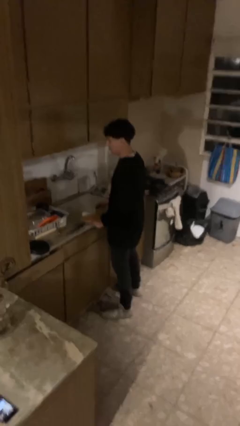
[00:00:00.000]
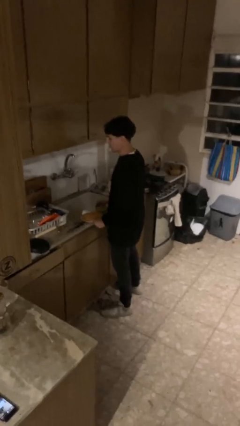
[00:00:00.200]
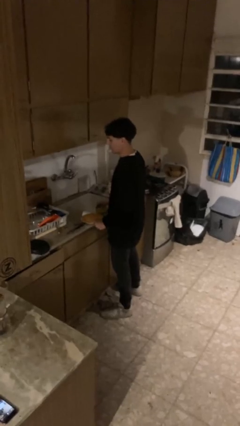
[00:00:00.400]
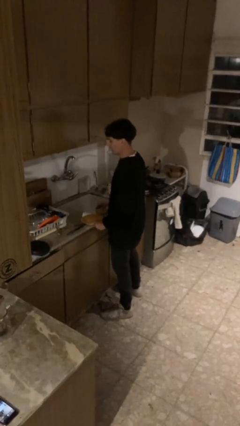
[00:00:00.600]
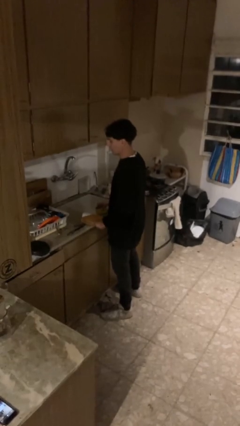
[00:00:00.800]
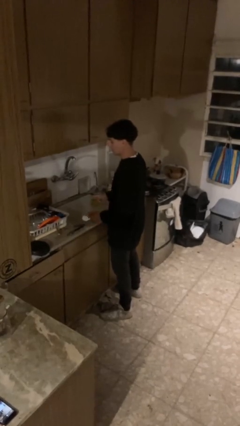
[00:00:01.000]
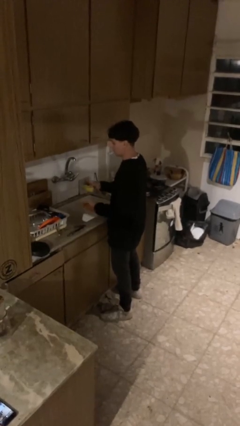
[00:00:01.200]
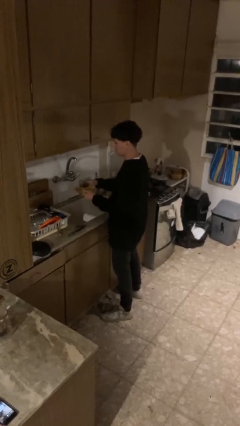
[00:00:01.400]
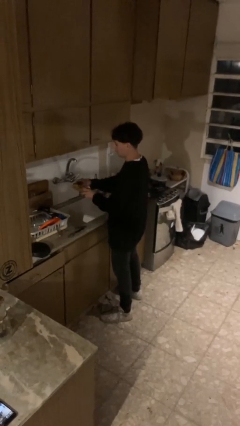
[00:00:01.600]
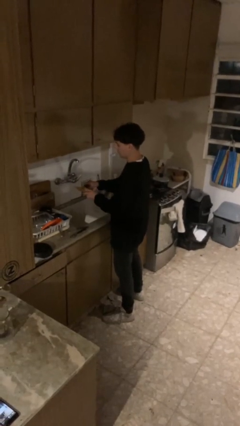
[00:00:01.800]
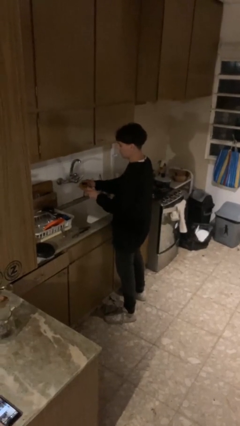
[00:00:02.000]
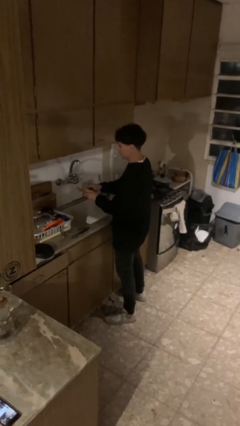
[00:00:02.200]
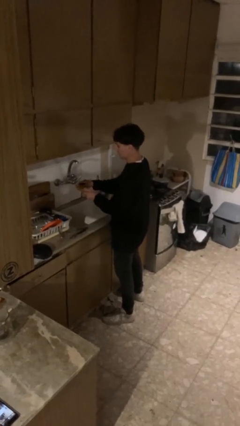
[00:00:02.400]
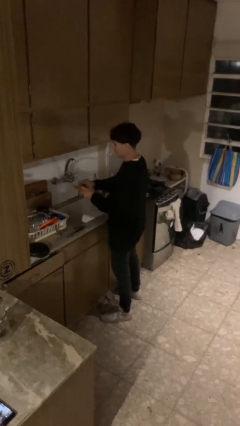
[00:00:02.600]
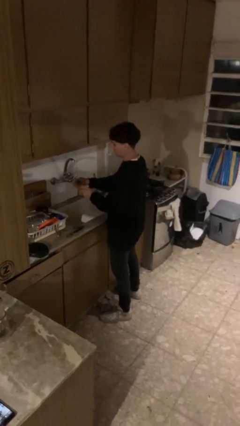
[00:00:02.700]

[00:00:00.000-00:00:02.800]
person washes dish

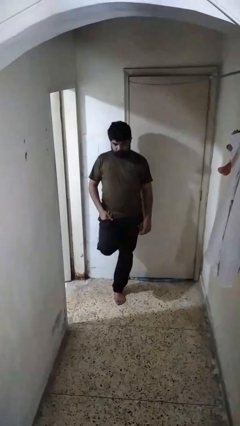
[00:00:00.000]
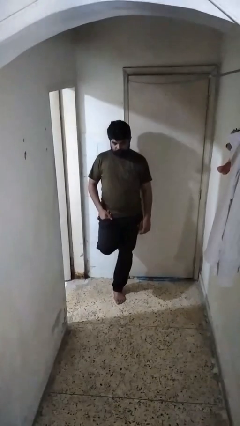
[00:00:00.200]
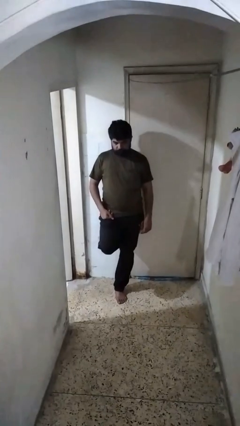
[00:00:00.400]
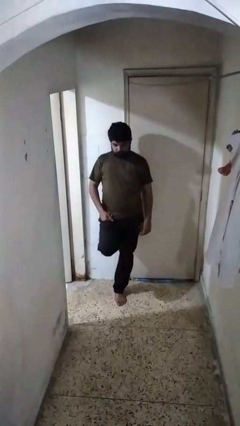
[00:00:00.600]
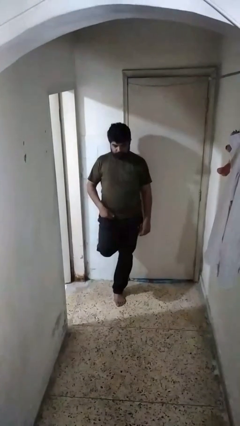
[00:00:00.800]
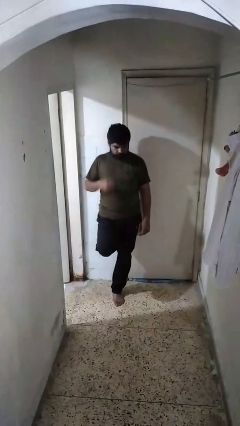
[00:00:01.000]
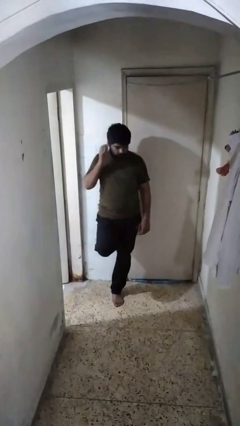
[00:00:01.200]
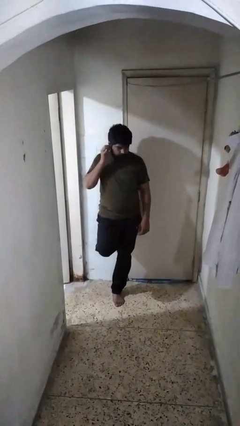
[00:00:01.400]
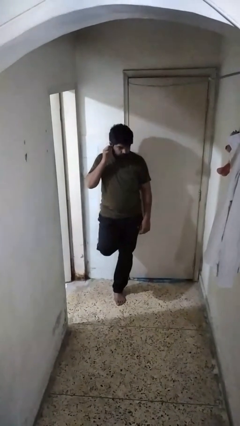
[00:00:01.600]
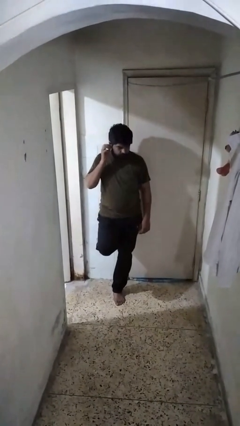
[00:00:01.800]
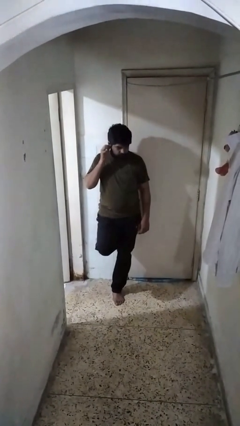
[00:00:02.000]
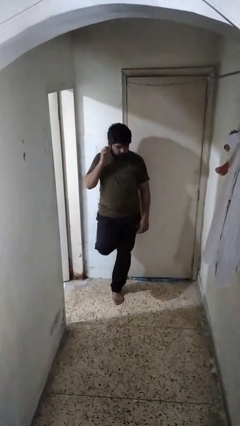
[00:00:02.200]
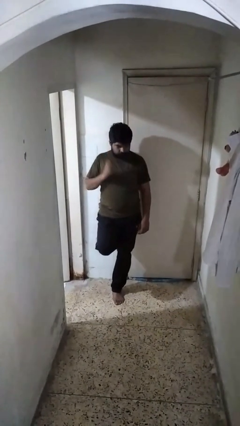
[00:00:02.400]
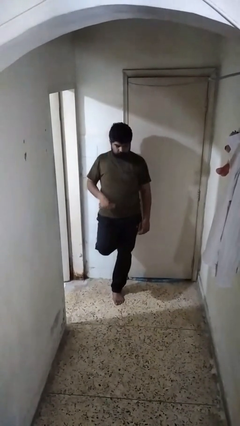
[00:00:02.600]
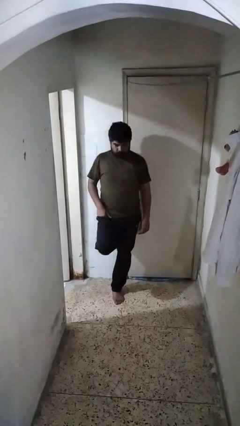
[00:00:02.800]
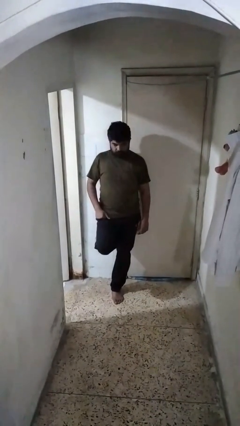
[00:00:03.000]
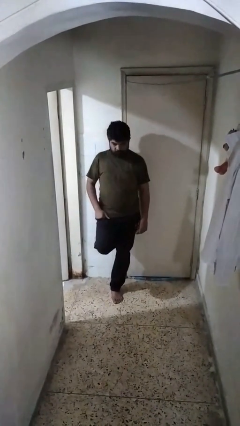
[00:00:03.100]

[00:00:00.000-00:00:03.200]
person touches earlobe

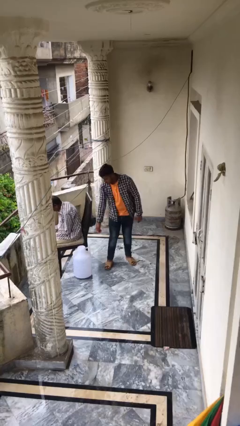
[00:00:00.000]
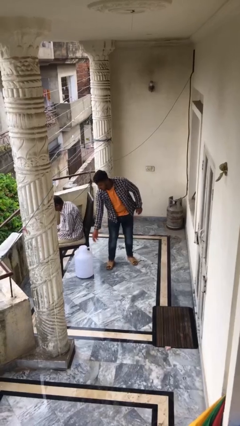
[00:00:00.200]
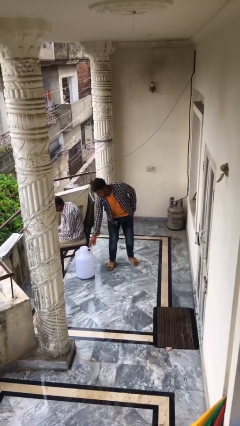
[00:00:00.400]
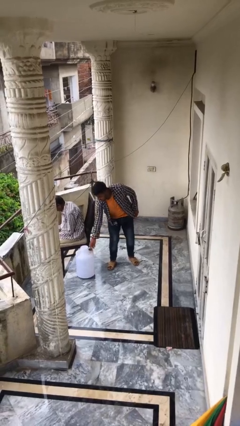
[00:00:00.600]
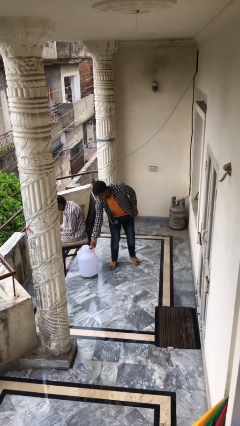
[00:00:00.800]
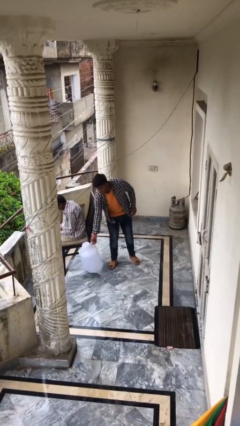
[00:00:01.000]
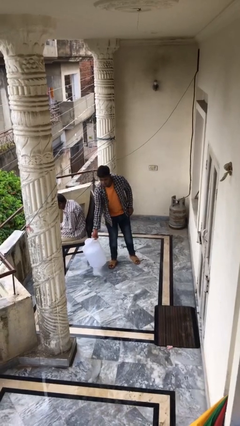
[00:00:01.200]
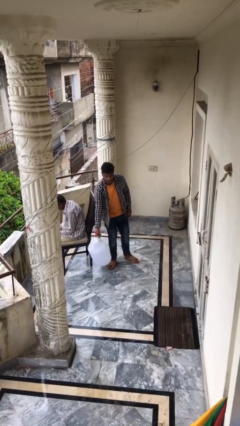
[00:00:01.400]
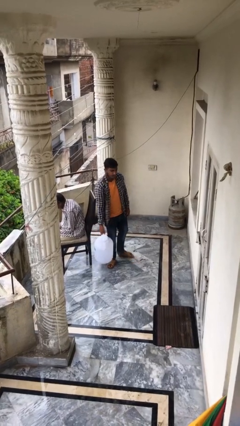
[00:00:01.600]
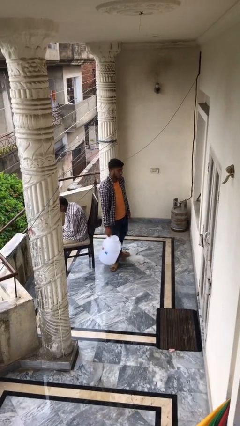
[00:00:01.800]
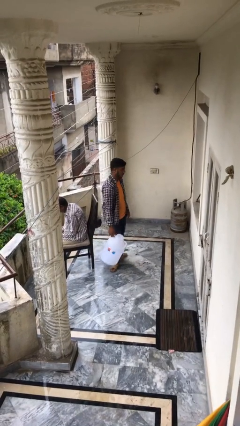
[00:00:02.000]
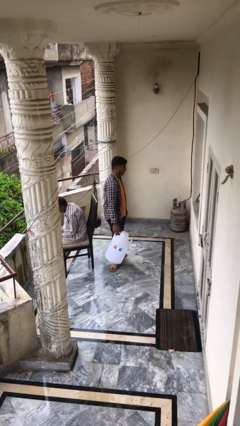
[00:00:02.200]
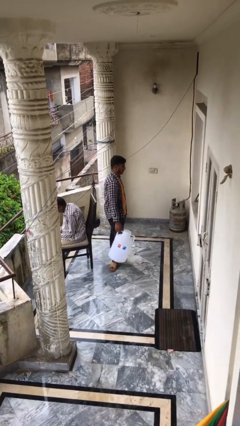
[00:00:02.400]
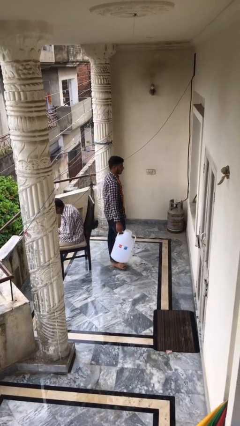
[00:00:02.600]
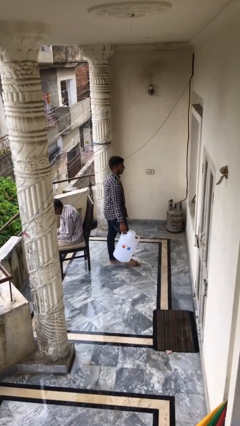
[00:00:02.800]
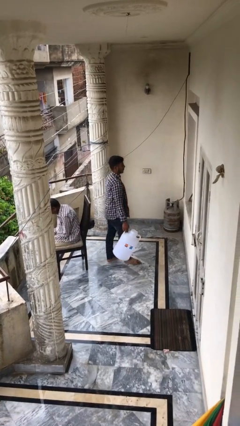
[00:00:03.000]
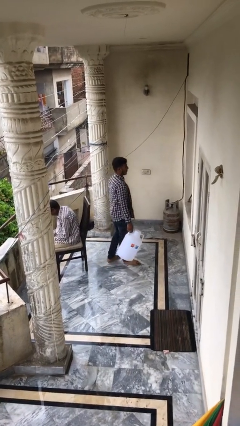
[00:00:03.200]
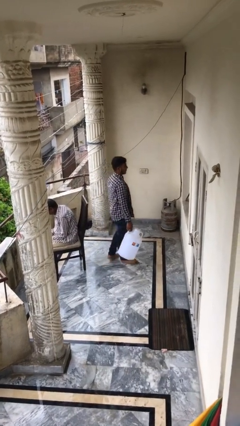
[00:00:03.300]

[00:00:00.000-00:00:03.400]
person steals object from person

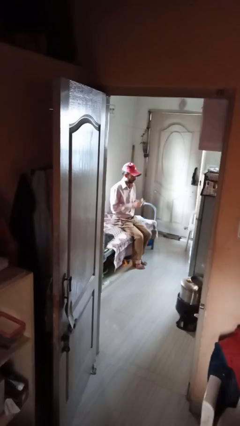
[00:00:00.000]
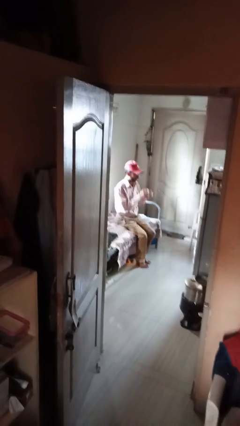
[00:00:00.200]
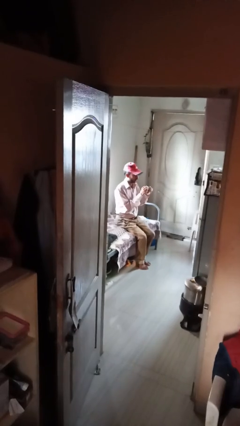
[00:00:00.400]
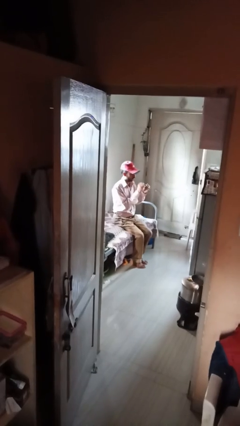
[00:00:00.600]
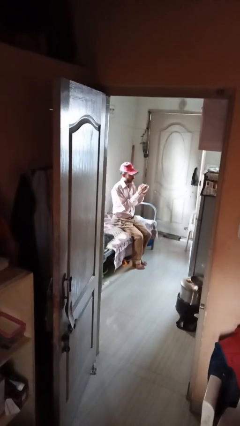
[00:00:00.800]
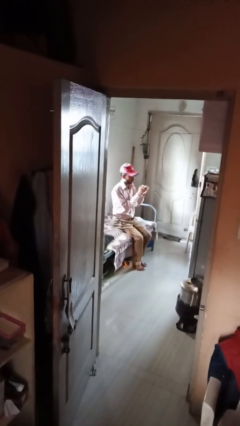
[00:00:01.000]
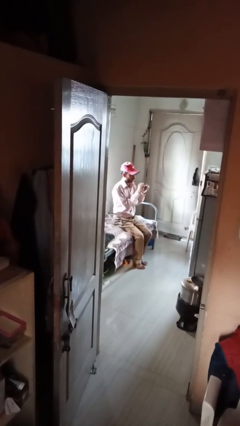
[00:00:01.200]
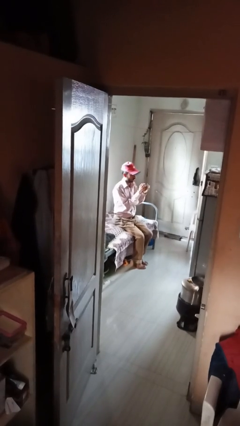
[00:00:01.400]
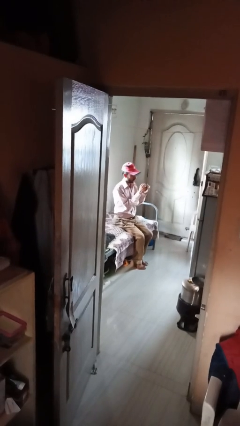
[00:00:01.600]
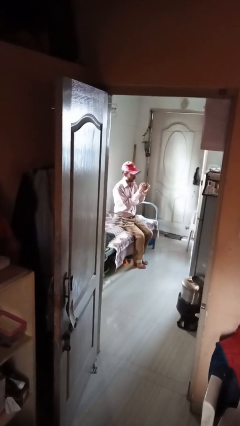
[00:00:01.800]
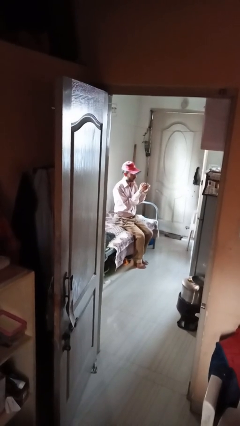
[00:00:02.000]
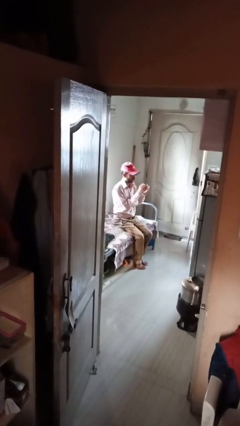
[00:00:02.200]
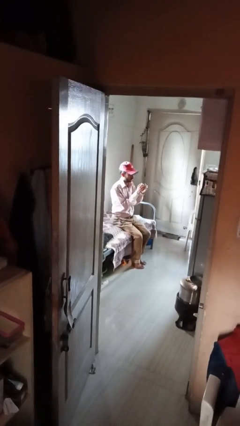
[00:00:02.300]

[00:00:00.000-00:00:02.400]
person files fingernails

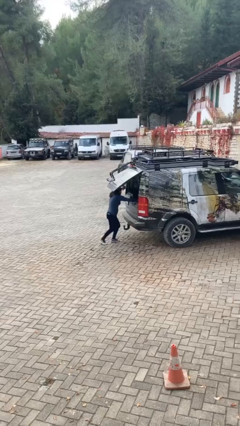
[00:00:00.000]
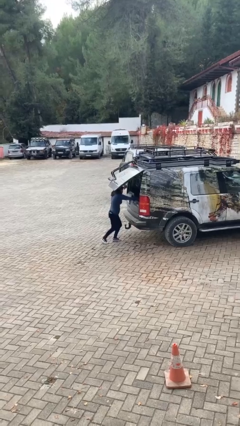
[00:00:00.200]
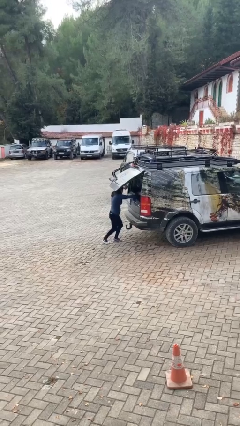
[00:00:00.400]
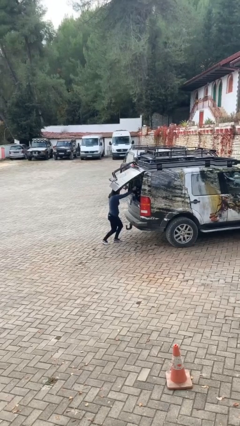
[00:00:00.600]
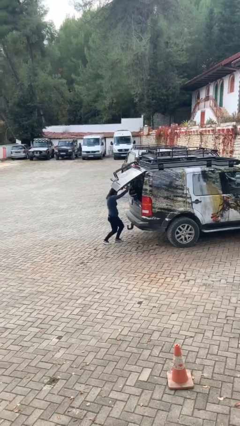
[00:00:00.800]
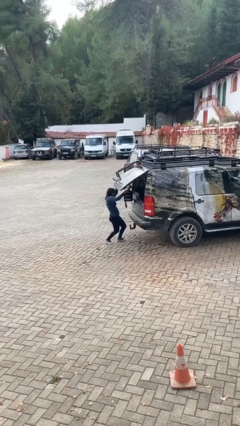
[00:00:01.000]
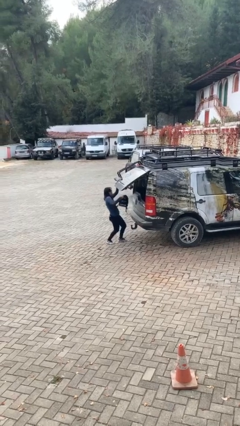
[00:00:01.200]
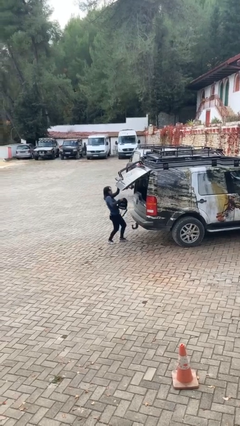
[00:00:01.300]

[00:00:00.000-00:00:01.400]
person unloads car

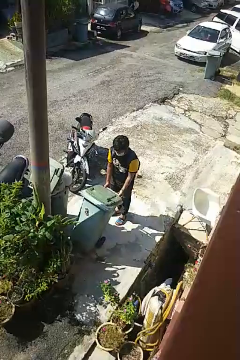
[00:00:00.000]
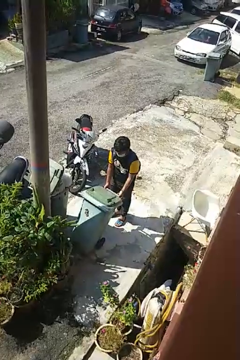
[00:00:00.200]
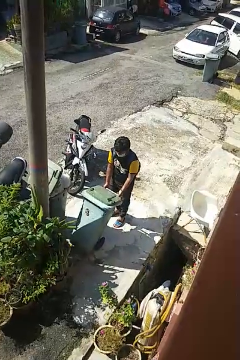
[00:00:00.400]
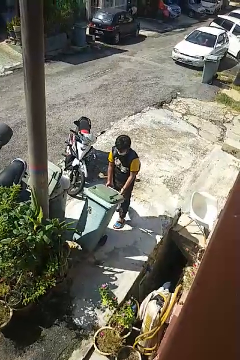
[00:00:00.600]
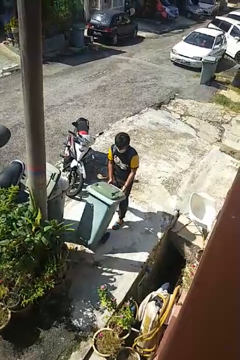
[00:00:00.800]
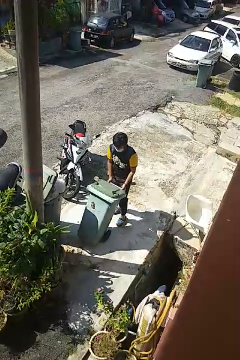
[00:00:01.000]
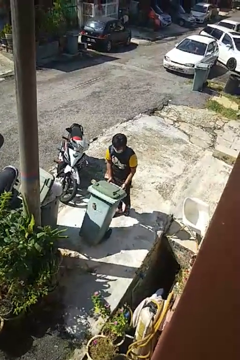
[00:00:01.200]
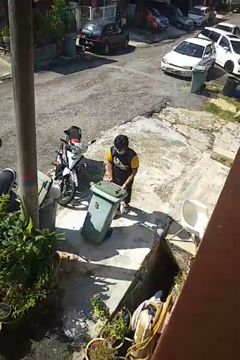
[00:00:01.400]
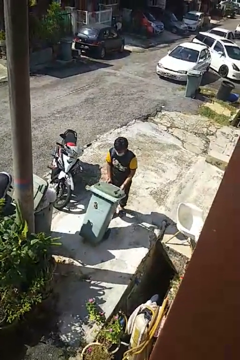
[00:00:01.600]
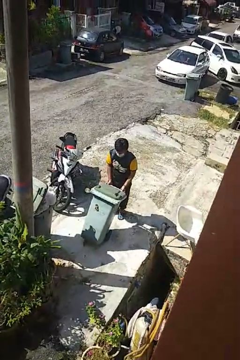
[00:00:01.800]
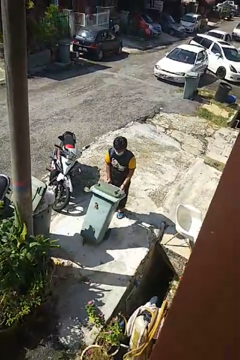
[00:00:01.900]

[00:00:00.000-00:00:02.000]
person pulls wheeled trashcan

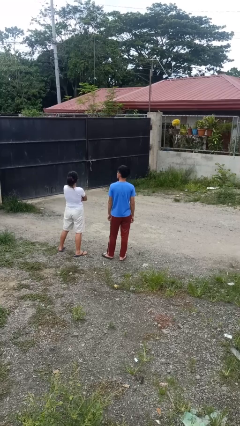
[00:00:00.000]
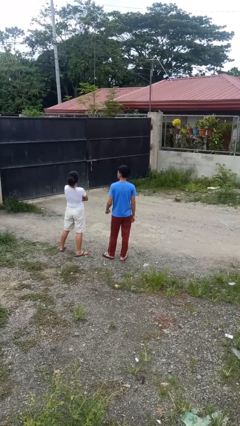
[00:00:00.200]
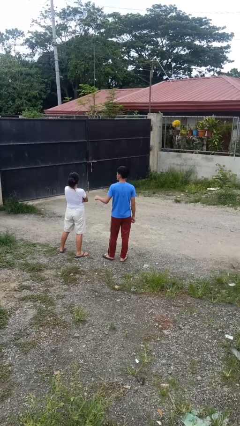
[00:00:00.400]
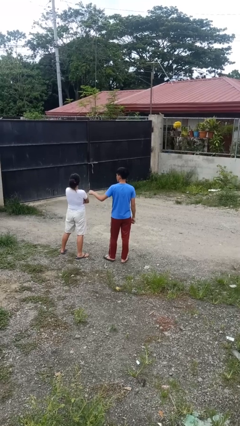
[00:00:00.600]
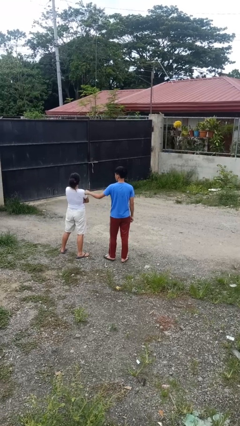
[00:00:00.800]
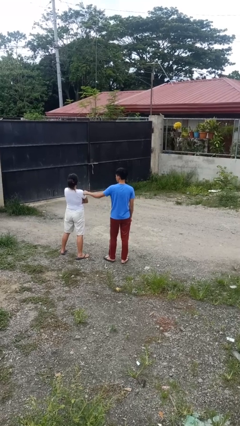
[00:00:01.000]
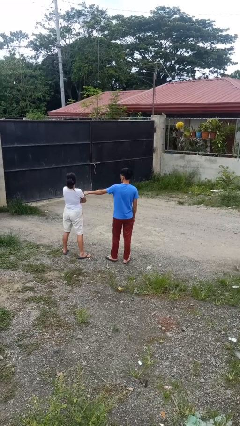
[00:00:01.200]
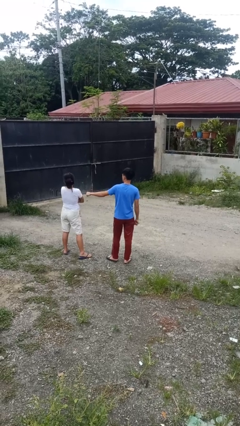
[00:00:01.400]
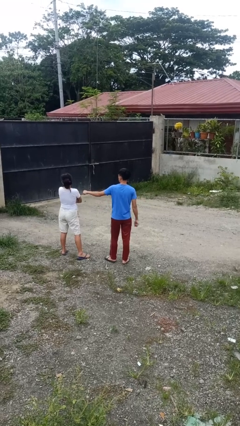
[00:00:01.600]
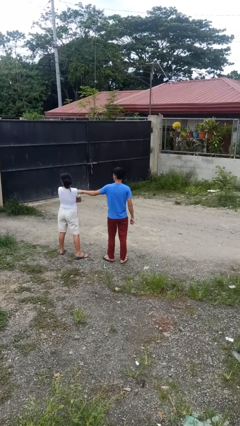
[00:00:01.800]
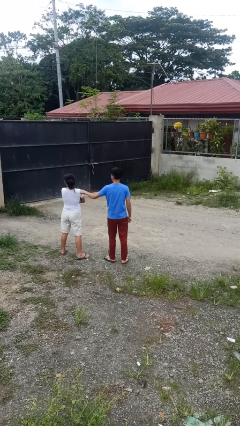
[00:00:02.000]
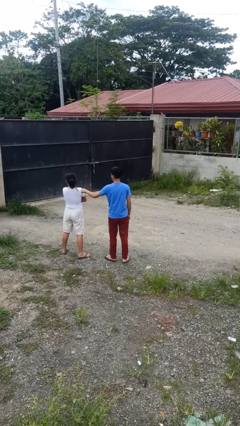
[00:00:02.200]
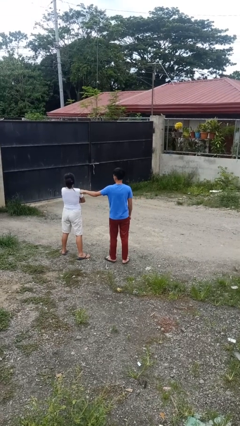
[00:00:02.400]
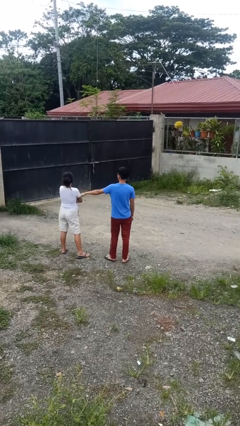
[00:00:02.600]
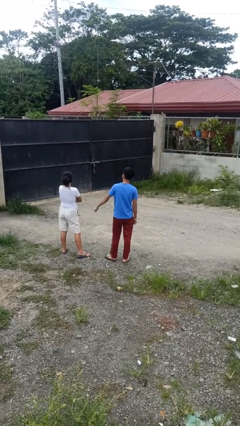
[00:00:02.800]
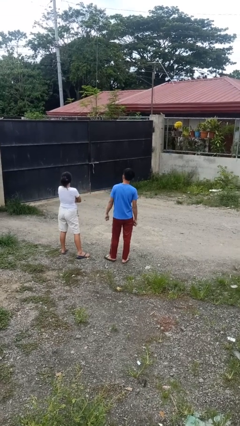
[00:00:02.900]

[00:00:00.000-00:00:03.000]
person pounds shoulders of person
